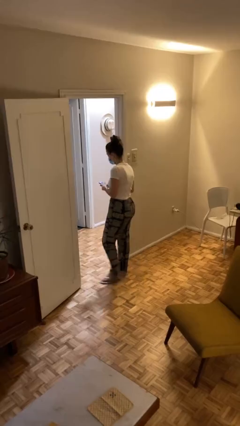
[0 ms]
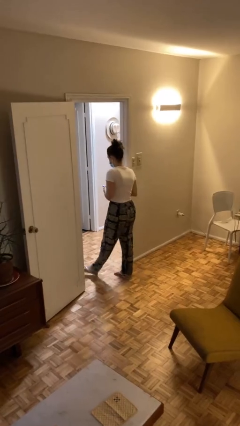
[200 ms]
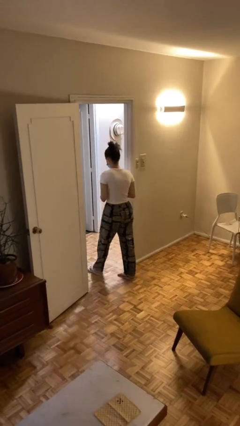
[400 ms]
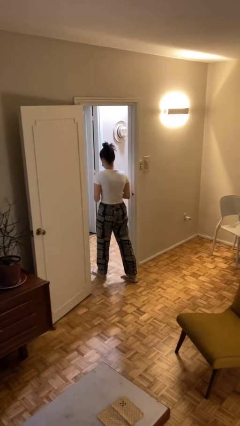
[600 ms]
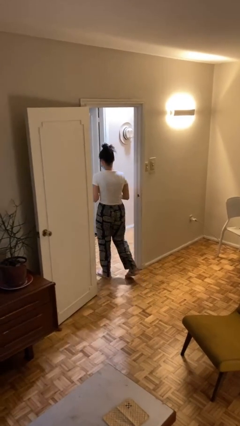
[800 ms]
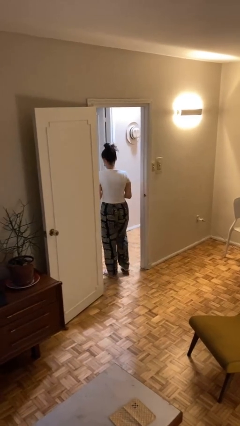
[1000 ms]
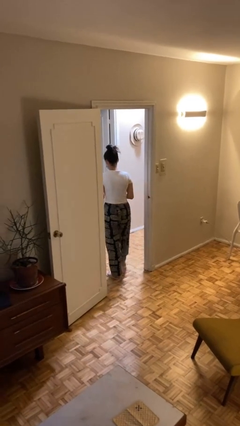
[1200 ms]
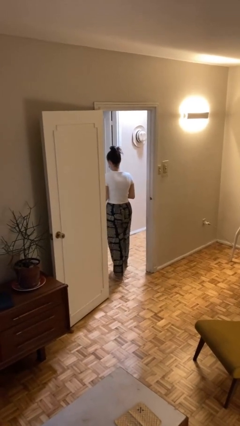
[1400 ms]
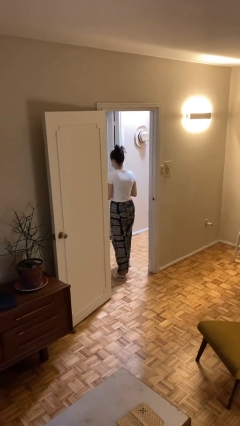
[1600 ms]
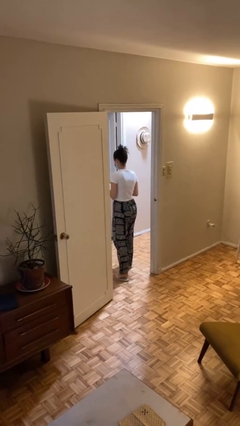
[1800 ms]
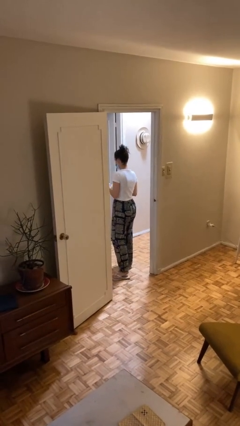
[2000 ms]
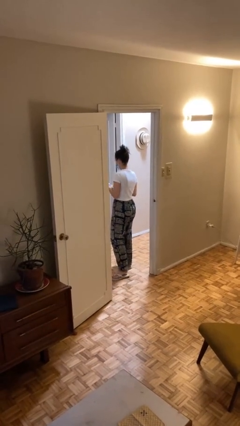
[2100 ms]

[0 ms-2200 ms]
person exits scene through structure

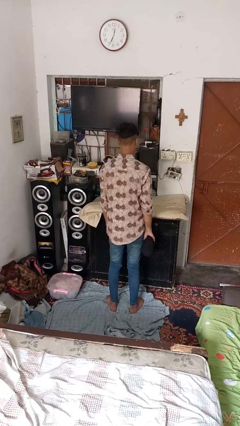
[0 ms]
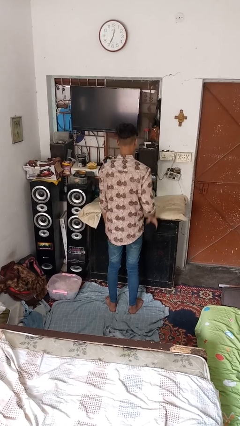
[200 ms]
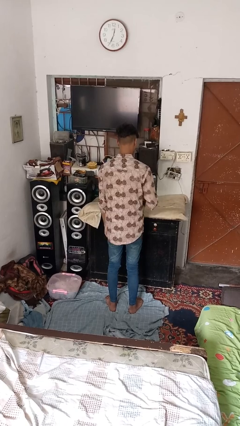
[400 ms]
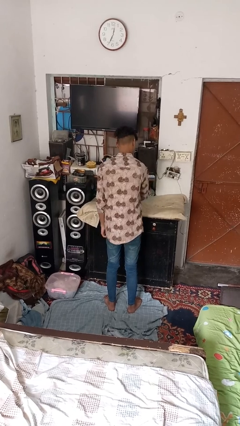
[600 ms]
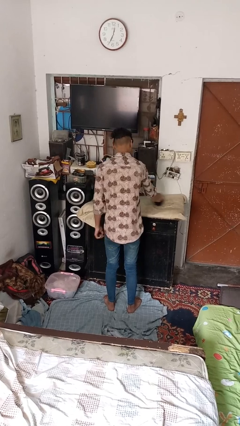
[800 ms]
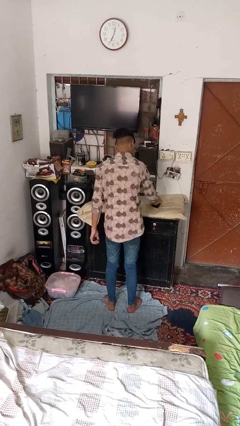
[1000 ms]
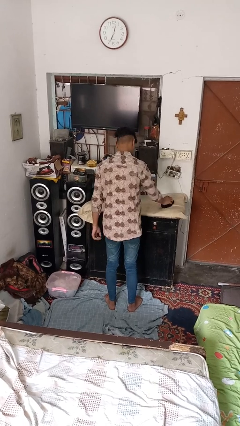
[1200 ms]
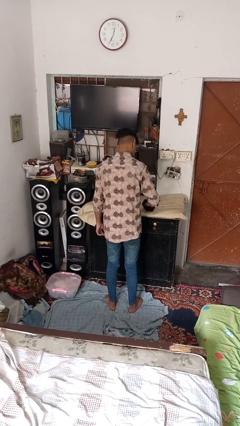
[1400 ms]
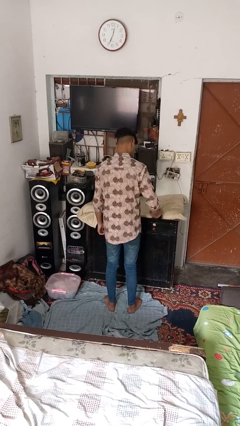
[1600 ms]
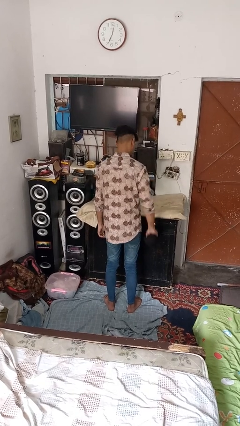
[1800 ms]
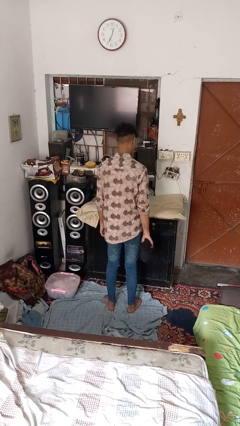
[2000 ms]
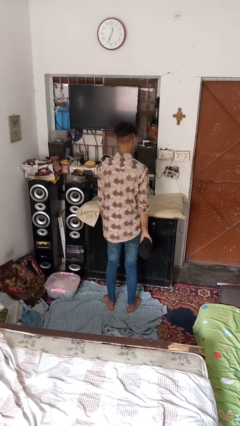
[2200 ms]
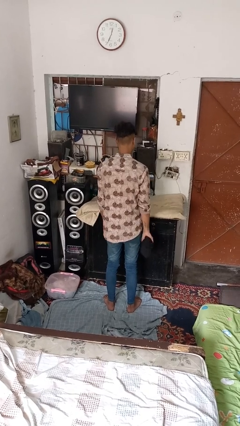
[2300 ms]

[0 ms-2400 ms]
person cleans table with rag

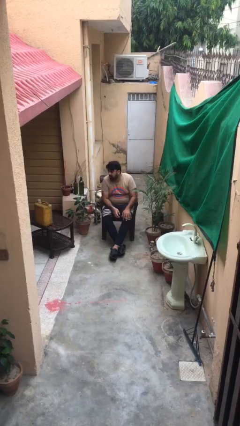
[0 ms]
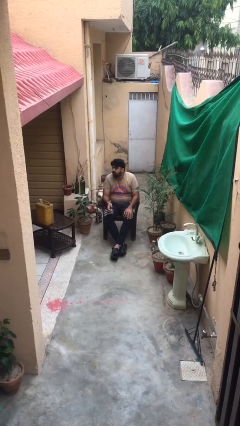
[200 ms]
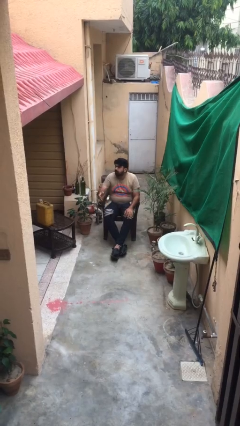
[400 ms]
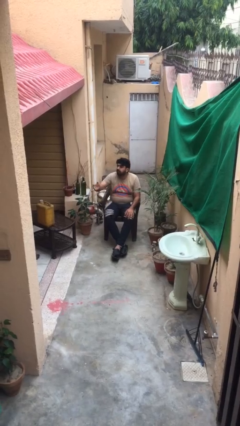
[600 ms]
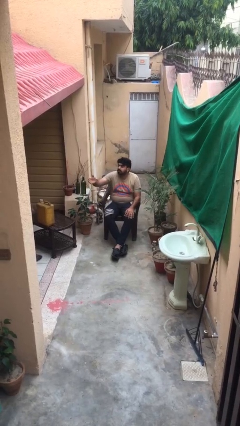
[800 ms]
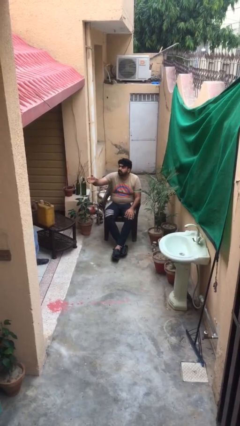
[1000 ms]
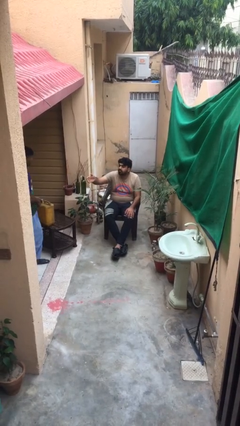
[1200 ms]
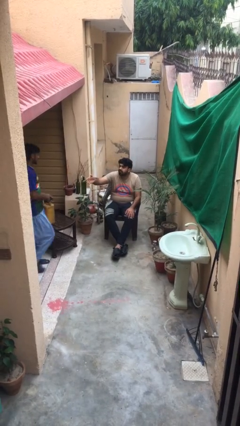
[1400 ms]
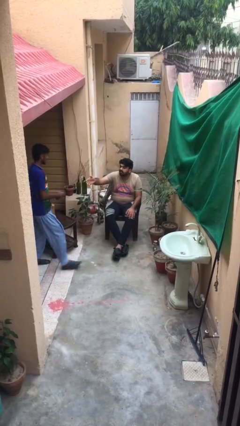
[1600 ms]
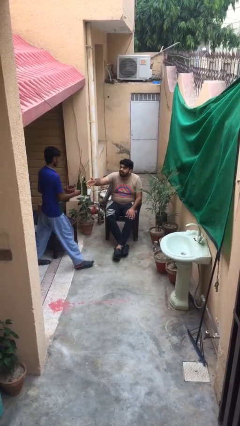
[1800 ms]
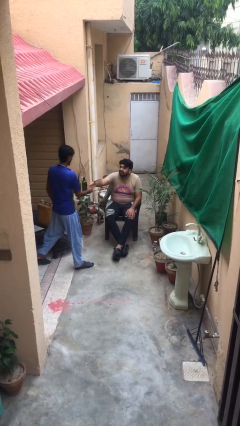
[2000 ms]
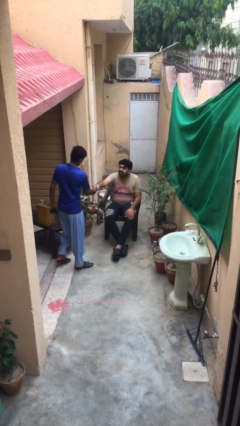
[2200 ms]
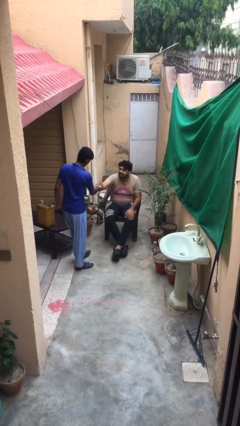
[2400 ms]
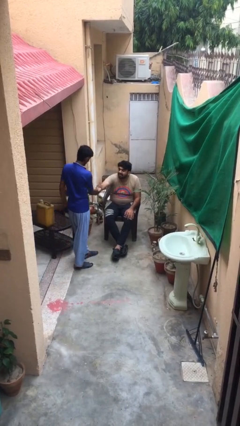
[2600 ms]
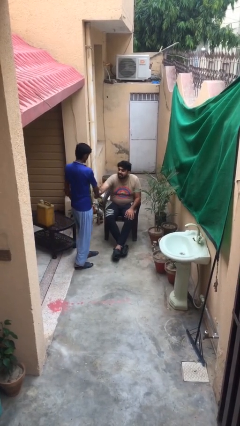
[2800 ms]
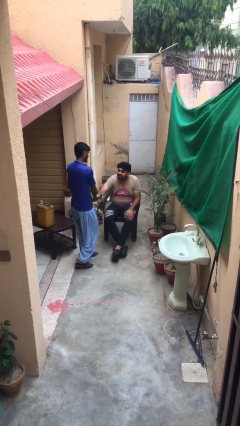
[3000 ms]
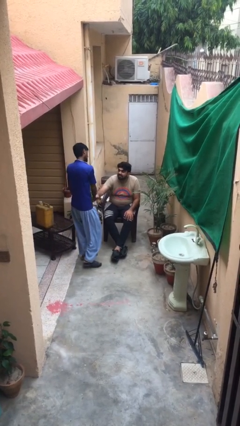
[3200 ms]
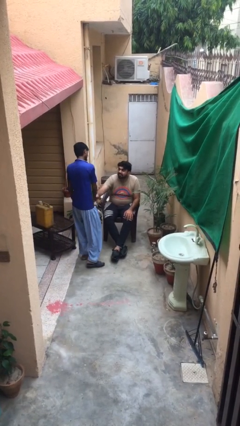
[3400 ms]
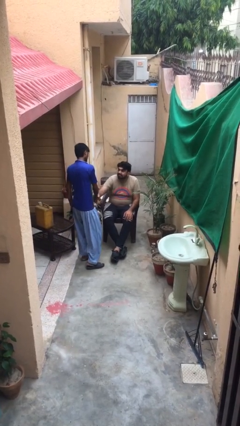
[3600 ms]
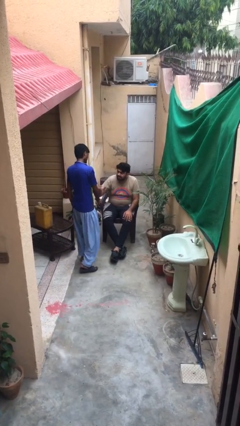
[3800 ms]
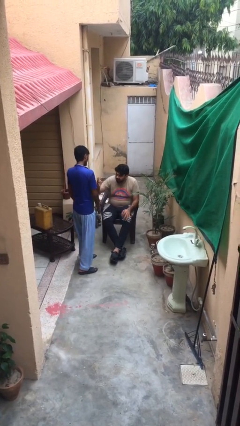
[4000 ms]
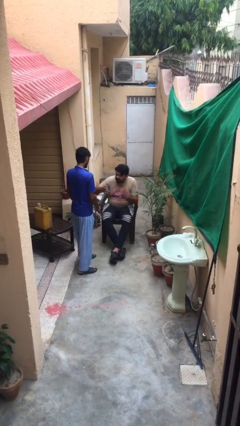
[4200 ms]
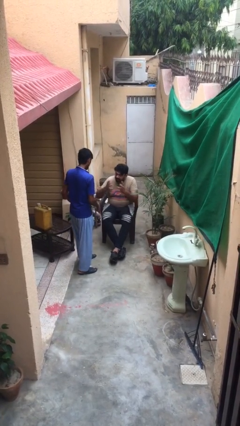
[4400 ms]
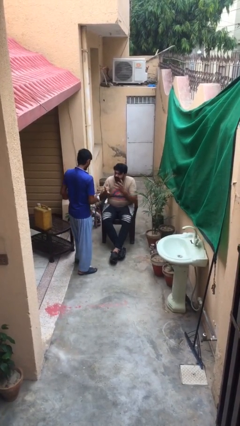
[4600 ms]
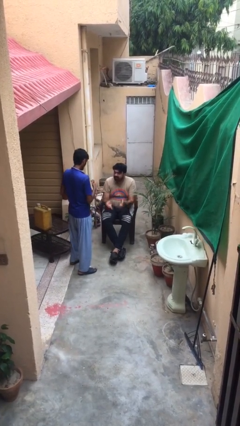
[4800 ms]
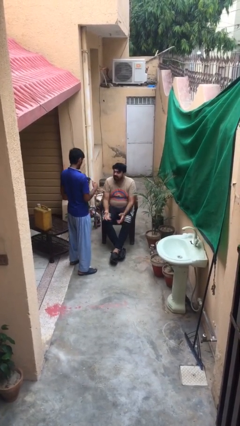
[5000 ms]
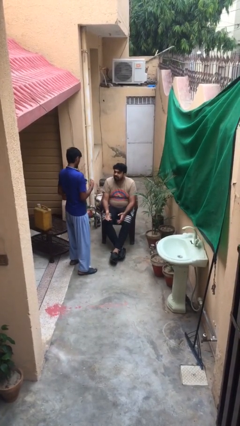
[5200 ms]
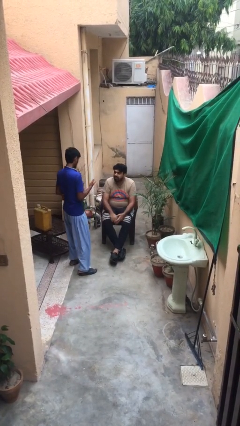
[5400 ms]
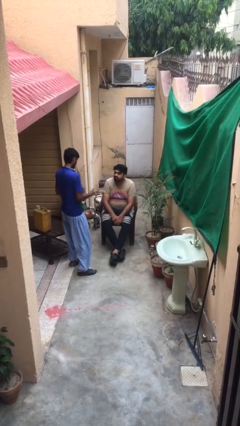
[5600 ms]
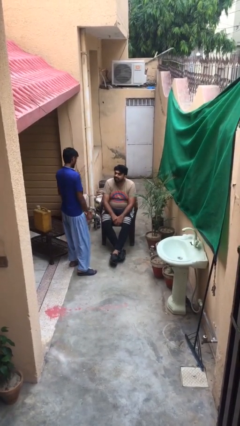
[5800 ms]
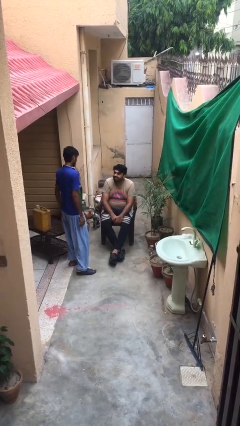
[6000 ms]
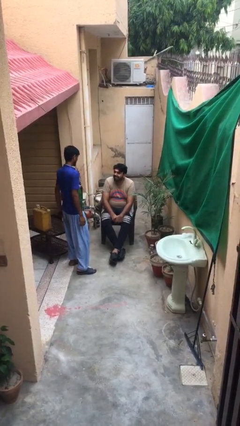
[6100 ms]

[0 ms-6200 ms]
person shakes hand

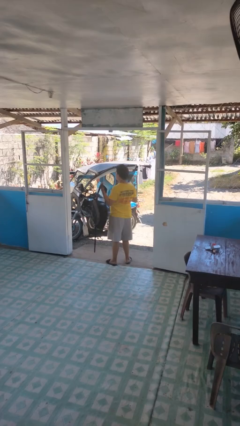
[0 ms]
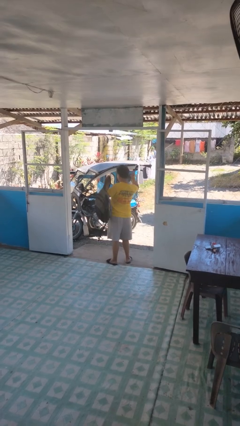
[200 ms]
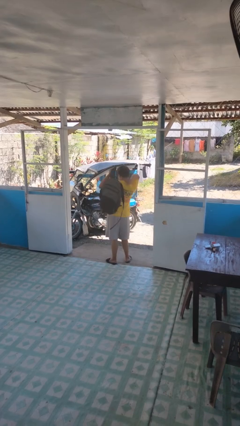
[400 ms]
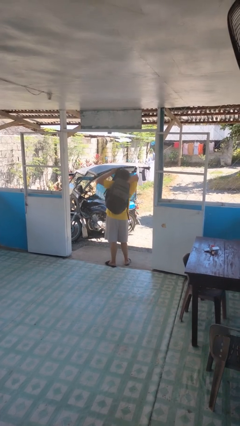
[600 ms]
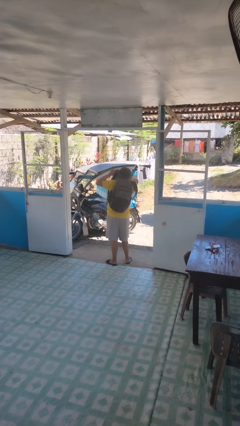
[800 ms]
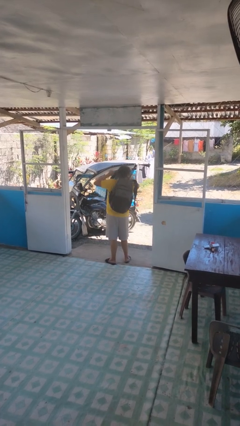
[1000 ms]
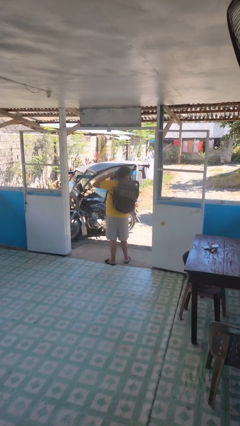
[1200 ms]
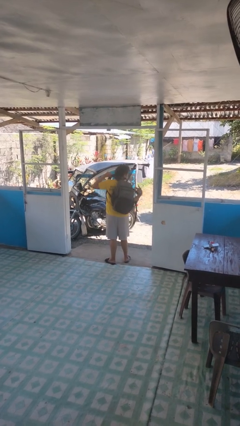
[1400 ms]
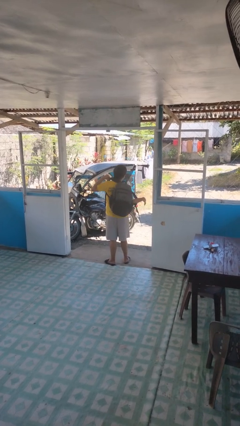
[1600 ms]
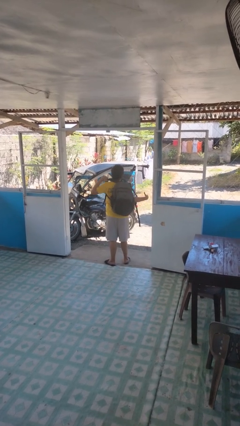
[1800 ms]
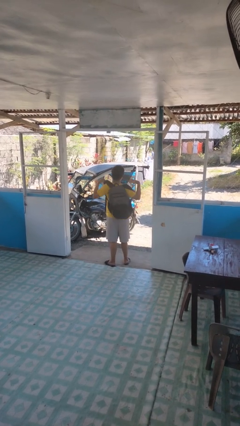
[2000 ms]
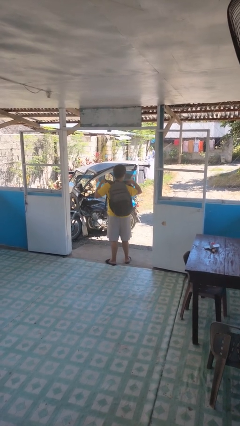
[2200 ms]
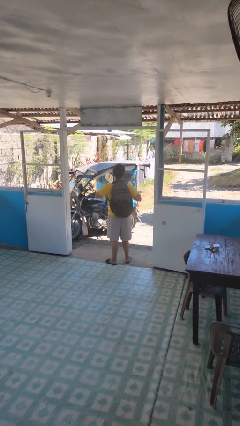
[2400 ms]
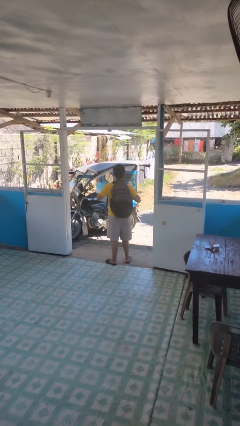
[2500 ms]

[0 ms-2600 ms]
person puts on backpack

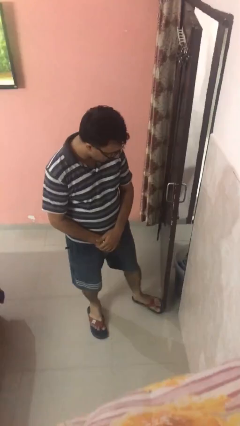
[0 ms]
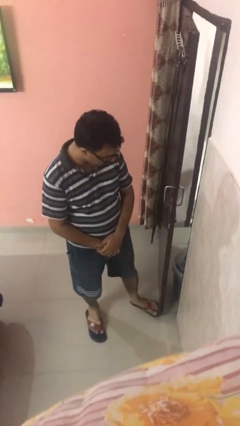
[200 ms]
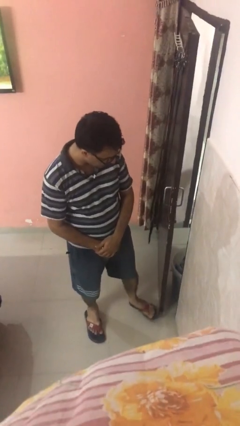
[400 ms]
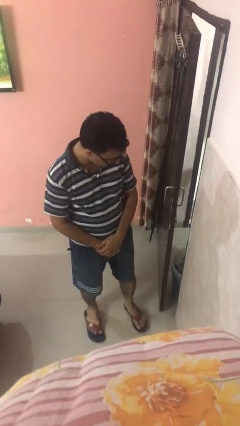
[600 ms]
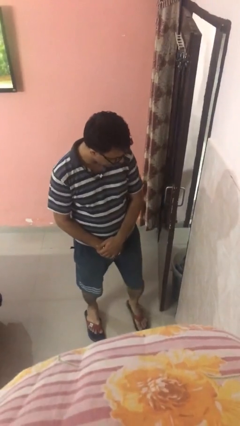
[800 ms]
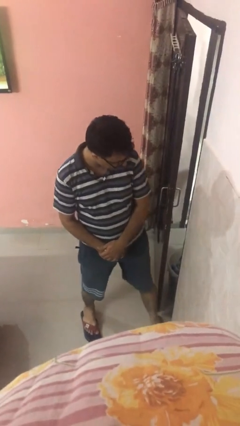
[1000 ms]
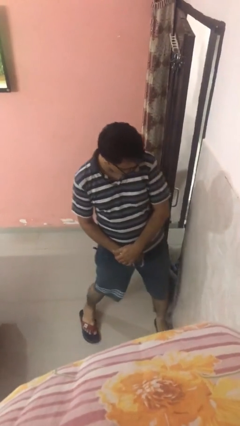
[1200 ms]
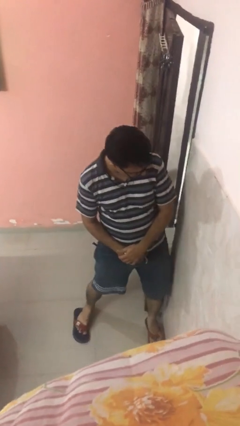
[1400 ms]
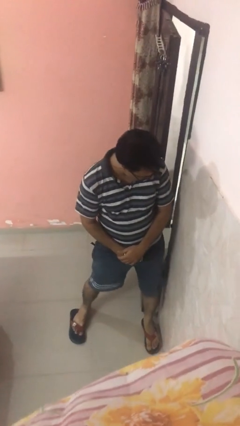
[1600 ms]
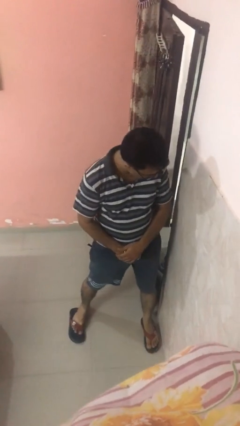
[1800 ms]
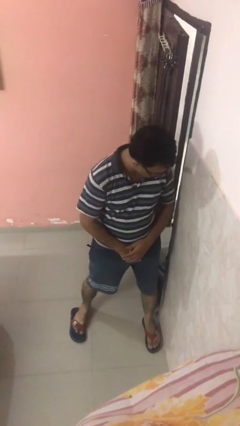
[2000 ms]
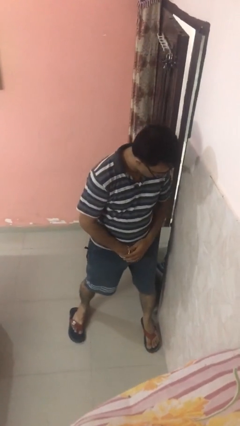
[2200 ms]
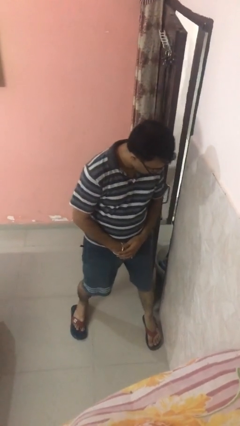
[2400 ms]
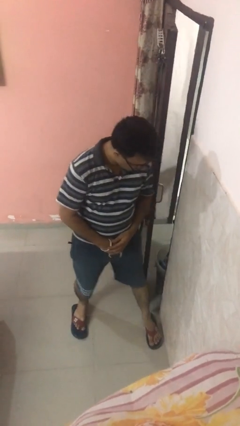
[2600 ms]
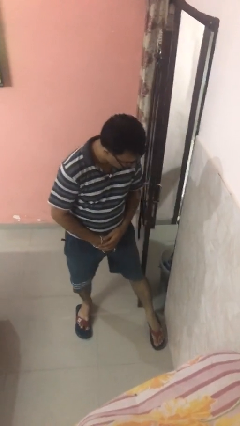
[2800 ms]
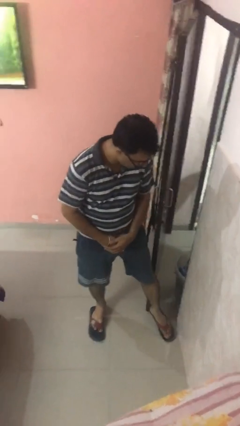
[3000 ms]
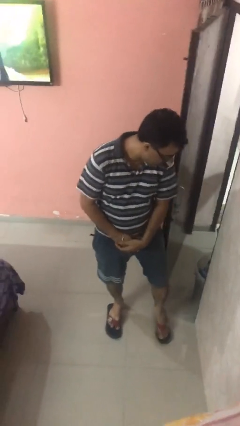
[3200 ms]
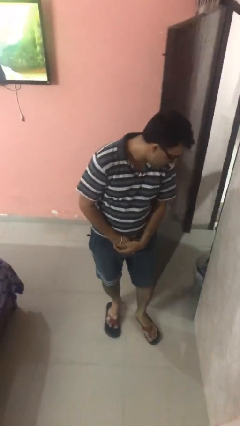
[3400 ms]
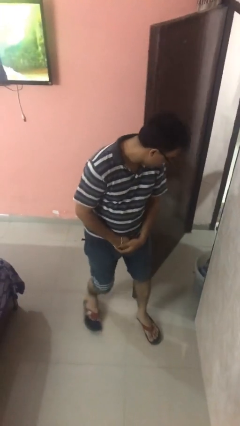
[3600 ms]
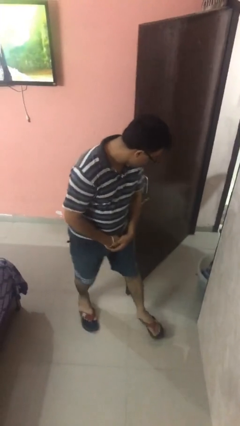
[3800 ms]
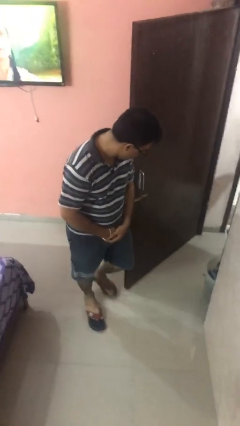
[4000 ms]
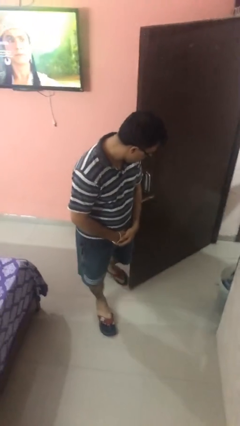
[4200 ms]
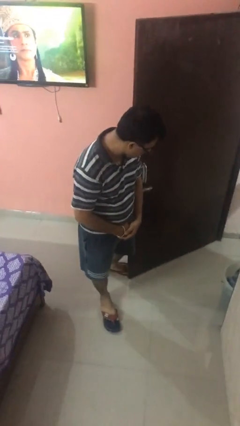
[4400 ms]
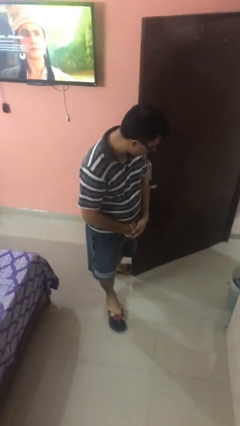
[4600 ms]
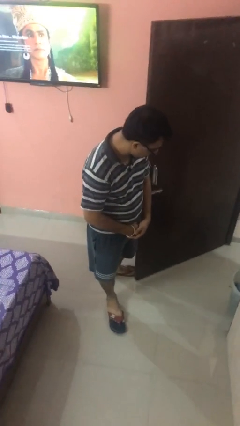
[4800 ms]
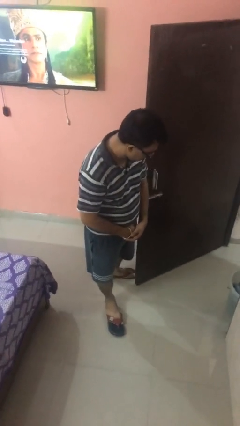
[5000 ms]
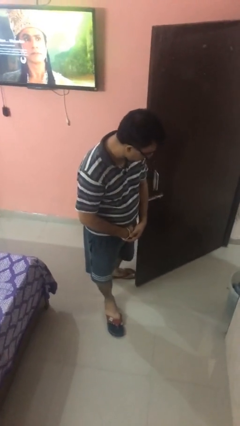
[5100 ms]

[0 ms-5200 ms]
person opens facility door
